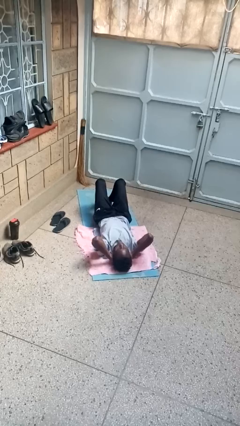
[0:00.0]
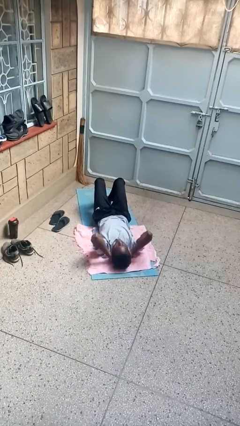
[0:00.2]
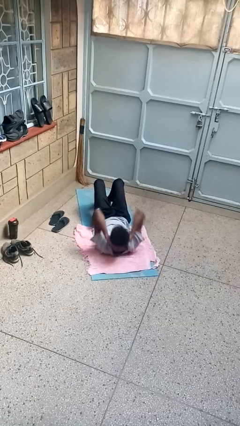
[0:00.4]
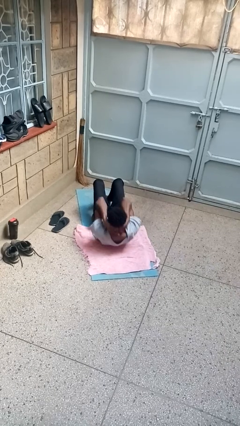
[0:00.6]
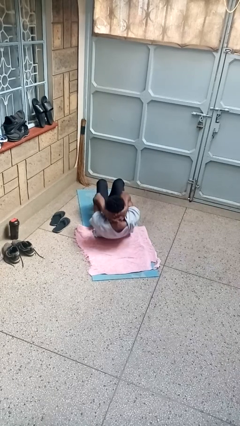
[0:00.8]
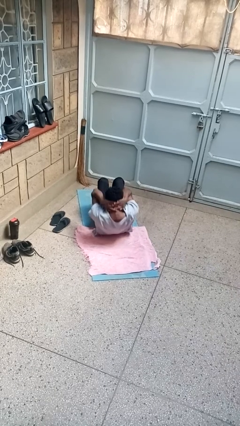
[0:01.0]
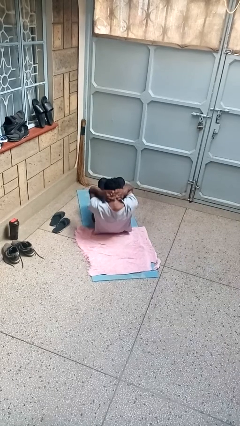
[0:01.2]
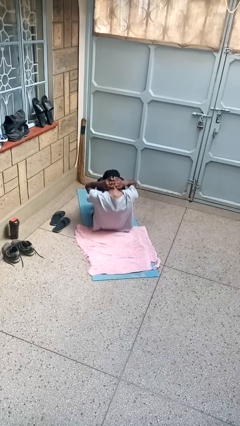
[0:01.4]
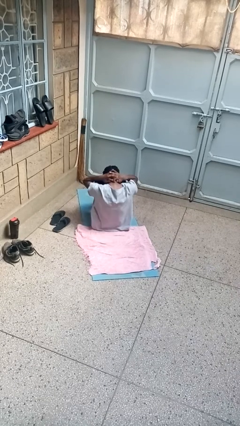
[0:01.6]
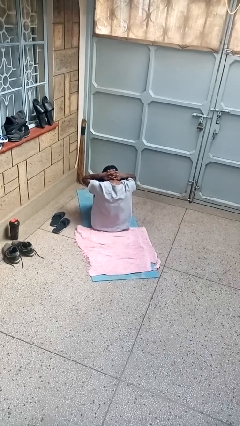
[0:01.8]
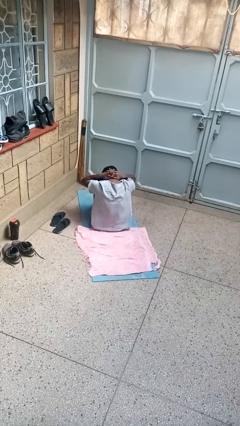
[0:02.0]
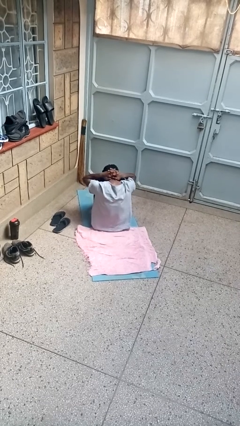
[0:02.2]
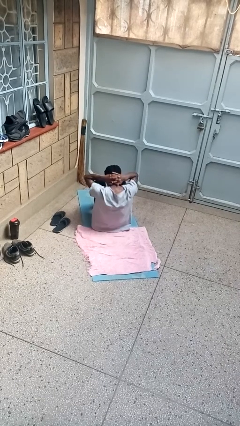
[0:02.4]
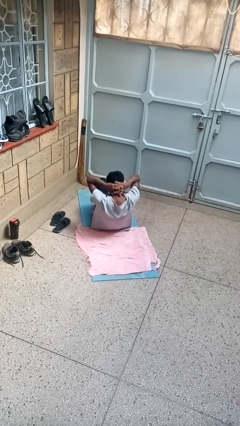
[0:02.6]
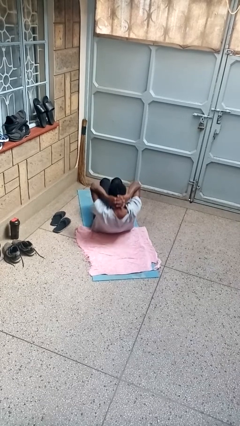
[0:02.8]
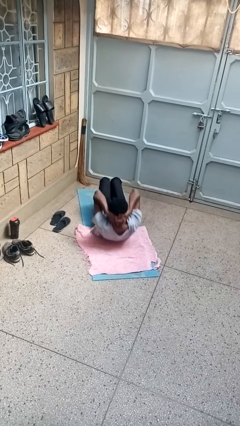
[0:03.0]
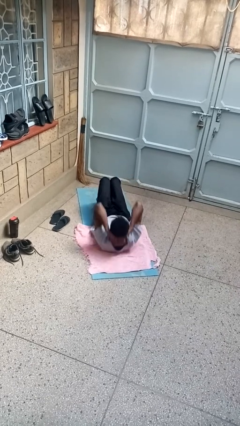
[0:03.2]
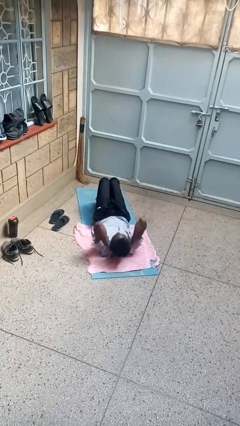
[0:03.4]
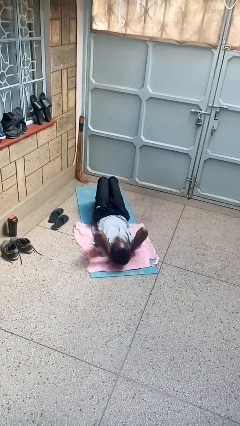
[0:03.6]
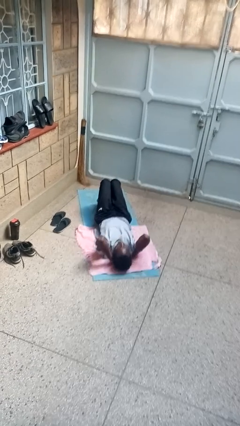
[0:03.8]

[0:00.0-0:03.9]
person exercises with situp

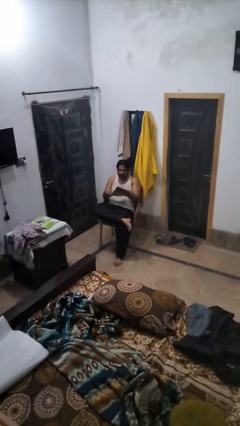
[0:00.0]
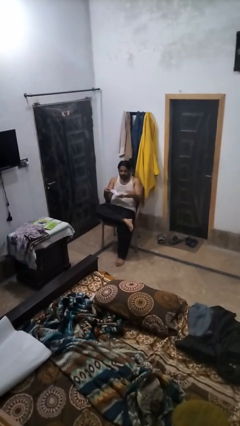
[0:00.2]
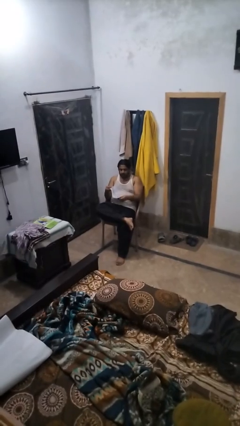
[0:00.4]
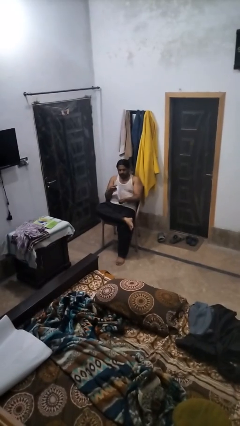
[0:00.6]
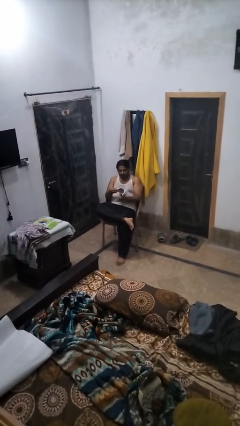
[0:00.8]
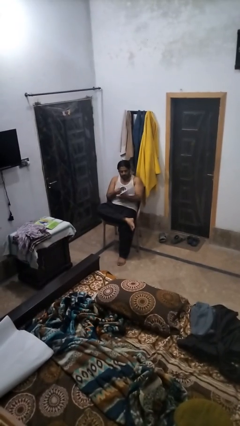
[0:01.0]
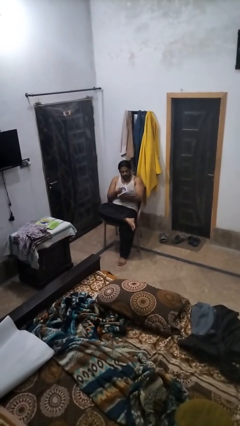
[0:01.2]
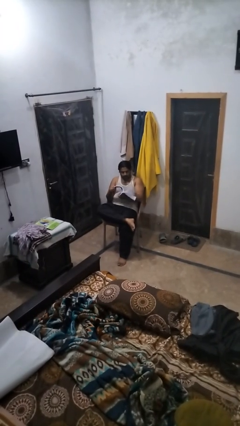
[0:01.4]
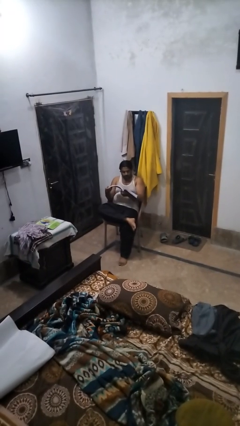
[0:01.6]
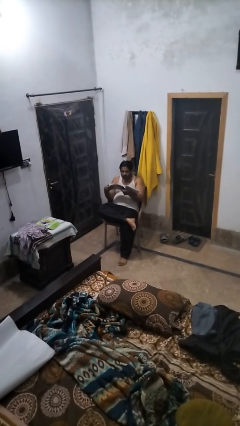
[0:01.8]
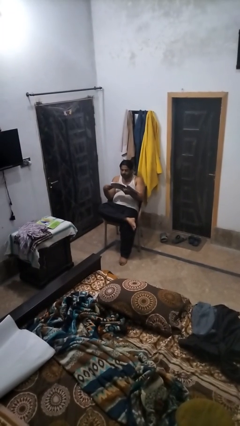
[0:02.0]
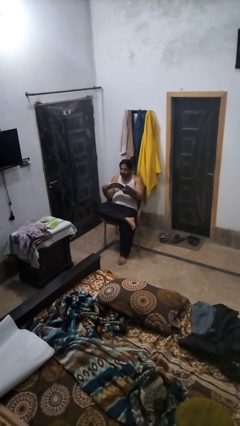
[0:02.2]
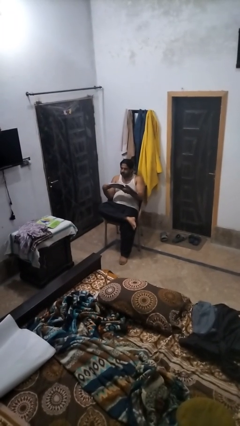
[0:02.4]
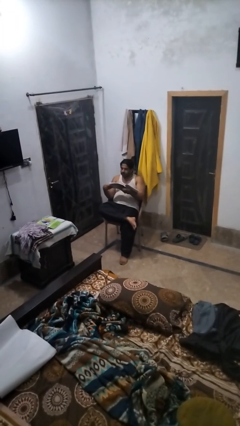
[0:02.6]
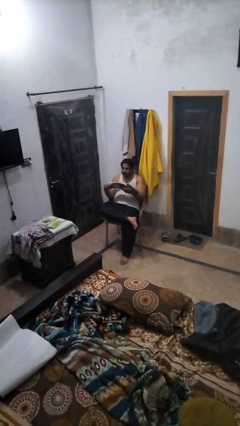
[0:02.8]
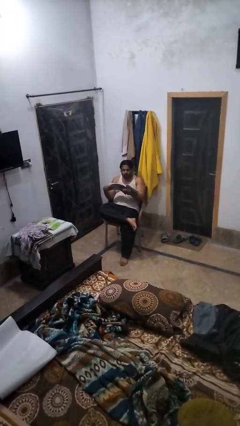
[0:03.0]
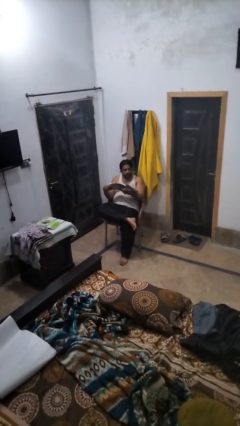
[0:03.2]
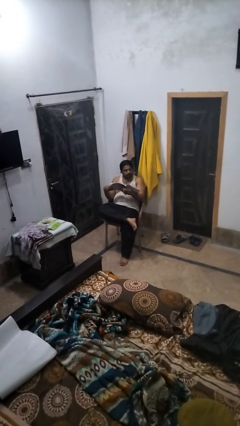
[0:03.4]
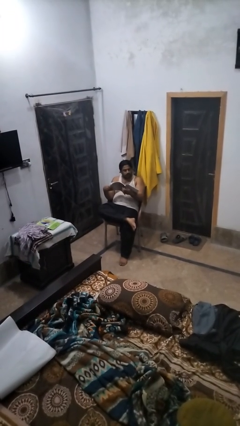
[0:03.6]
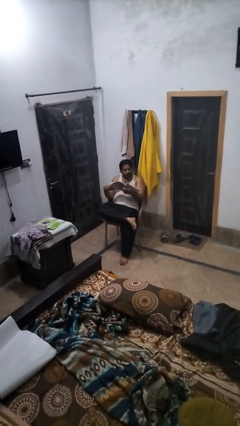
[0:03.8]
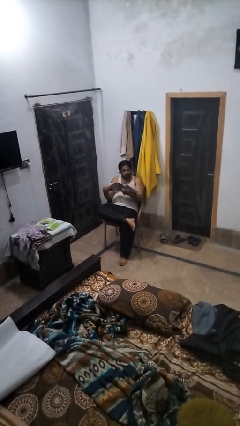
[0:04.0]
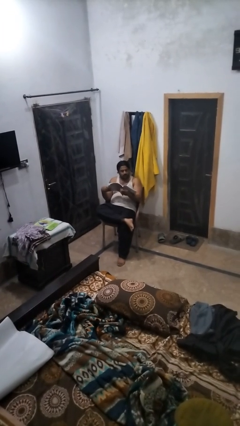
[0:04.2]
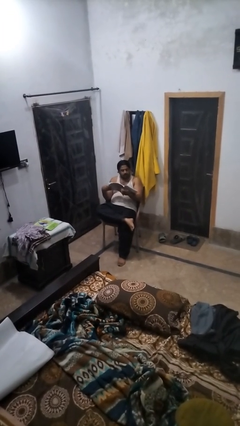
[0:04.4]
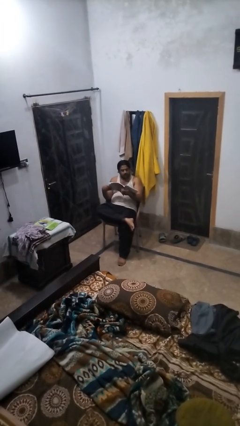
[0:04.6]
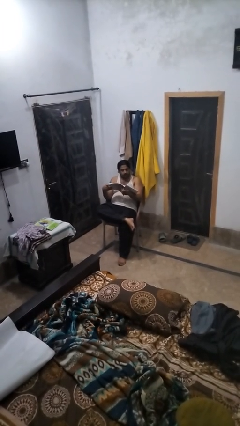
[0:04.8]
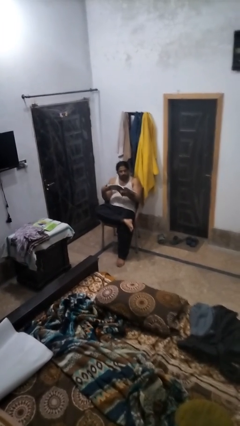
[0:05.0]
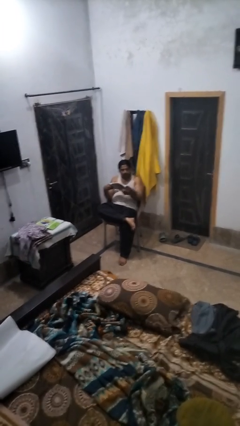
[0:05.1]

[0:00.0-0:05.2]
person reads book

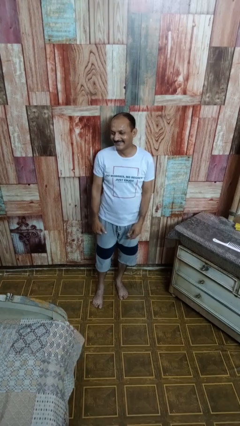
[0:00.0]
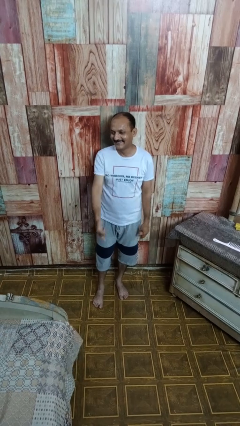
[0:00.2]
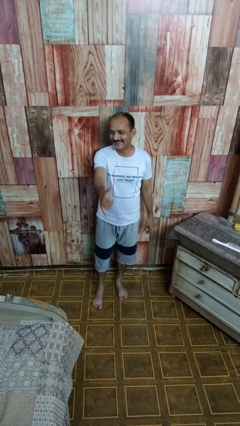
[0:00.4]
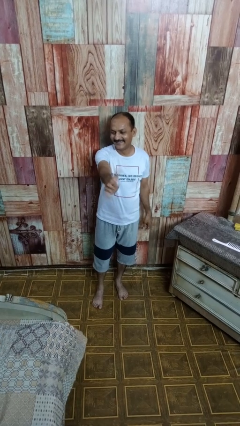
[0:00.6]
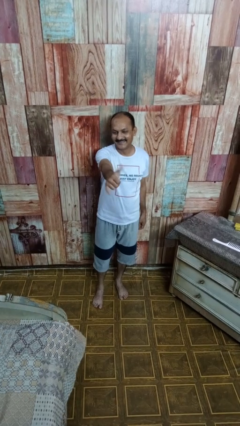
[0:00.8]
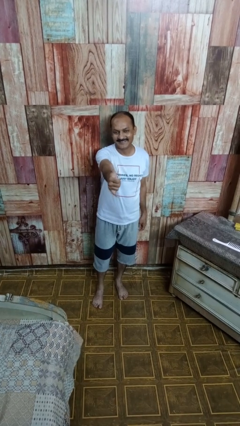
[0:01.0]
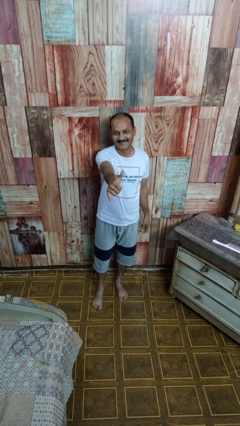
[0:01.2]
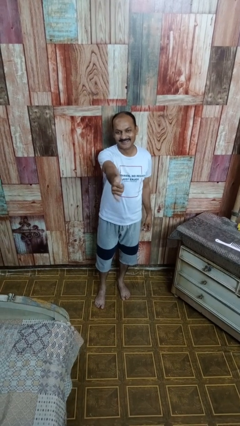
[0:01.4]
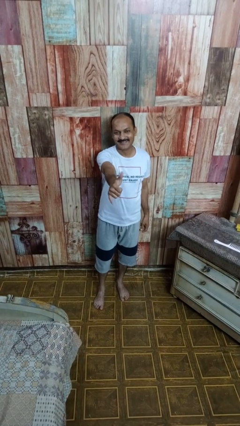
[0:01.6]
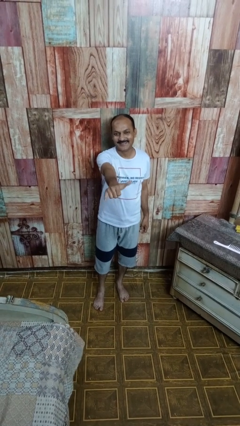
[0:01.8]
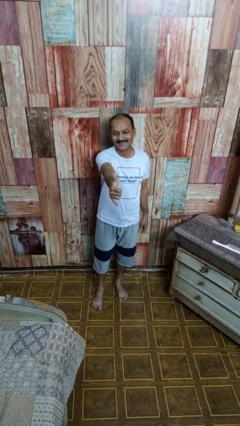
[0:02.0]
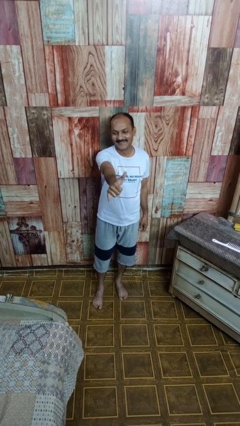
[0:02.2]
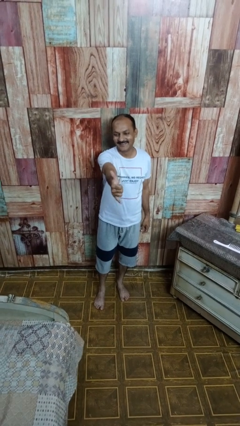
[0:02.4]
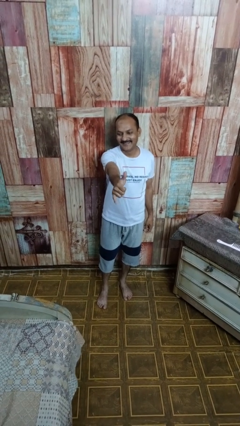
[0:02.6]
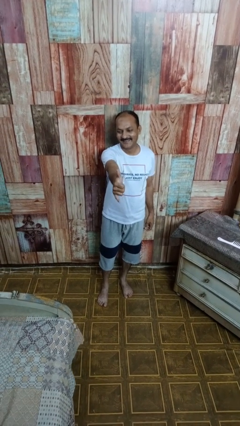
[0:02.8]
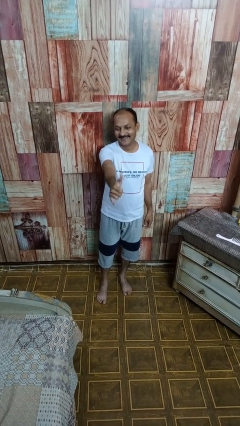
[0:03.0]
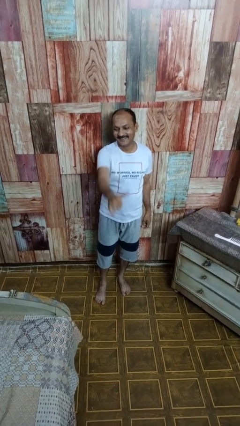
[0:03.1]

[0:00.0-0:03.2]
person gestures hang loose

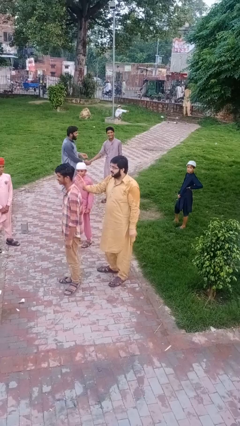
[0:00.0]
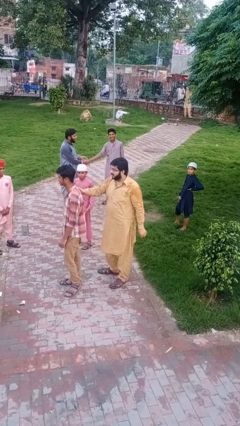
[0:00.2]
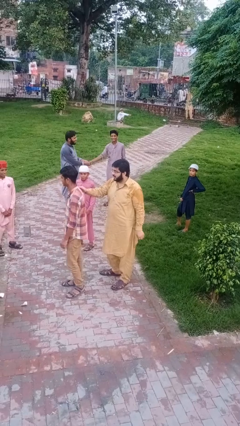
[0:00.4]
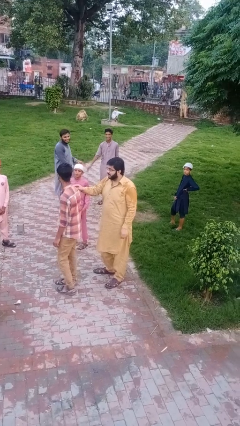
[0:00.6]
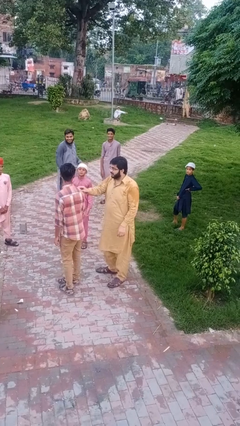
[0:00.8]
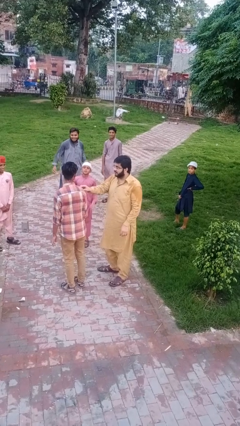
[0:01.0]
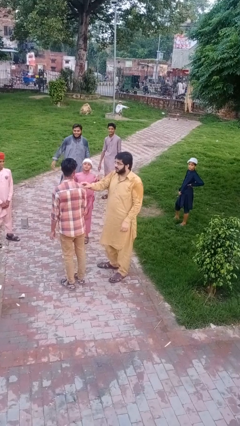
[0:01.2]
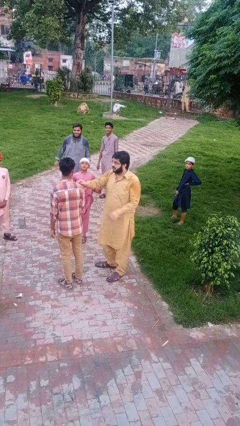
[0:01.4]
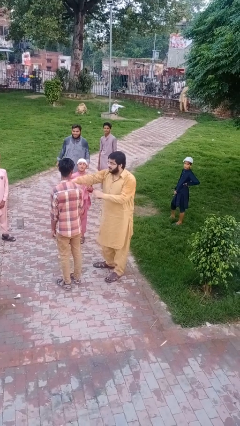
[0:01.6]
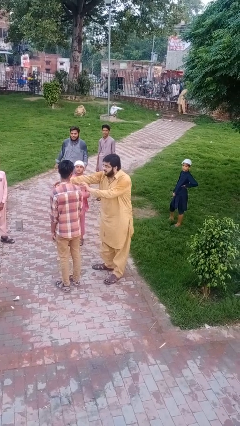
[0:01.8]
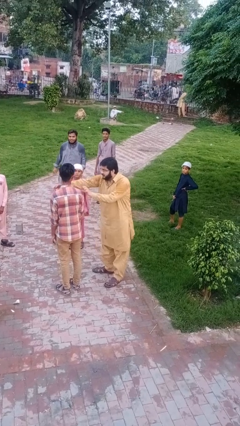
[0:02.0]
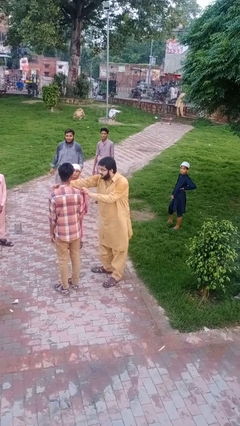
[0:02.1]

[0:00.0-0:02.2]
person grabs person by shoulder

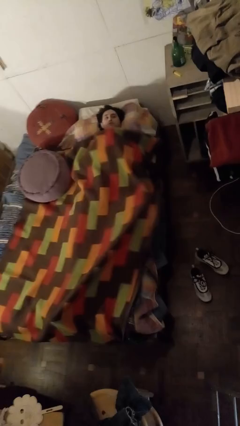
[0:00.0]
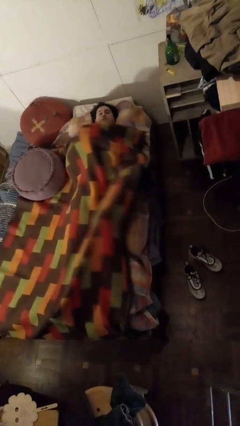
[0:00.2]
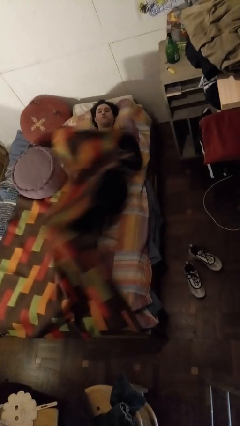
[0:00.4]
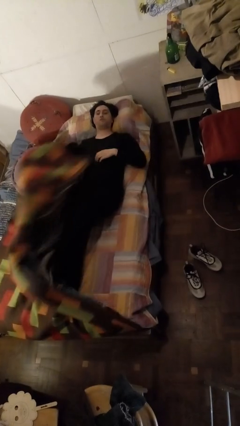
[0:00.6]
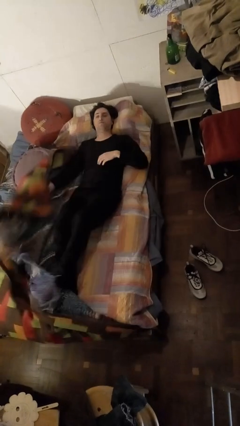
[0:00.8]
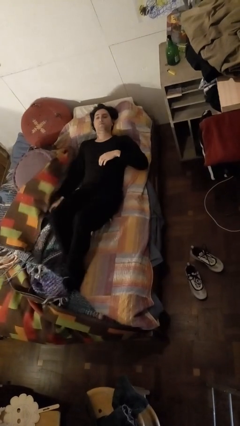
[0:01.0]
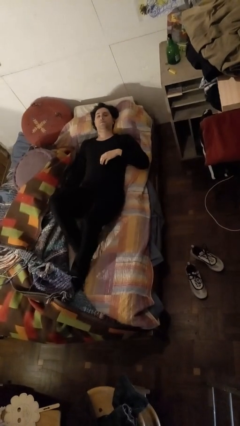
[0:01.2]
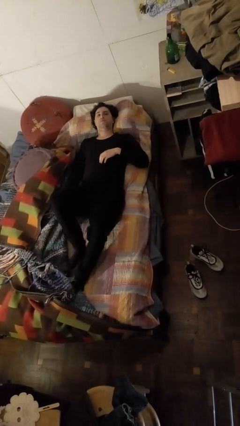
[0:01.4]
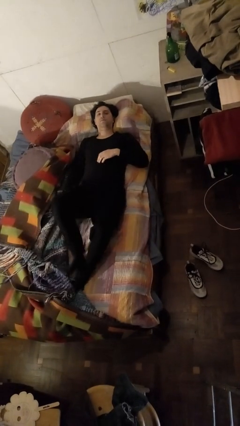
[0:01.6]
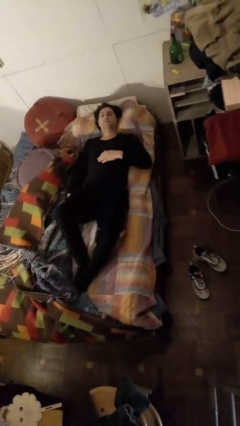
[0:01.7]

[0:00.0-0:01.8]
person uncovers with bedsheets

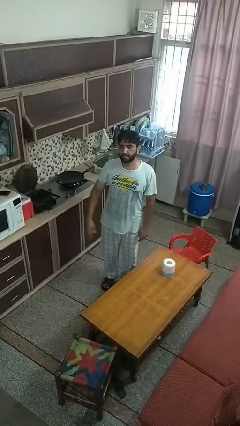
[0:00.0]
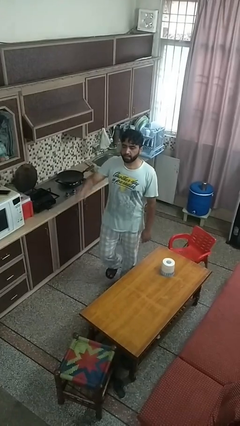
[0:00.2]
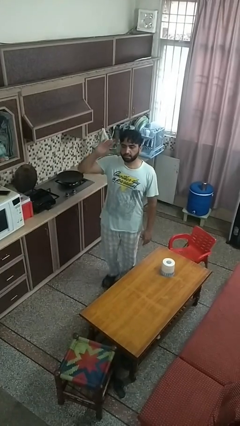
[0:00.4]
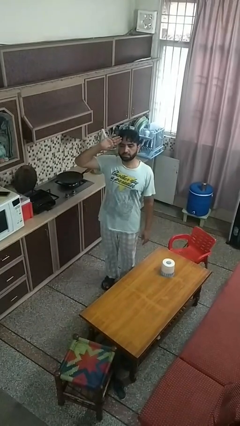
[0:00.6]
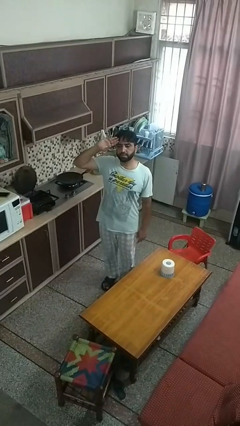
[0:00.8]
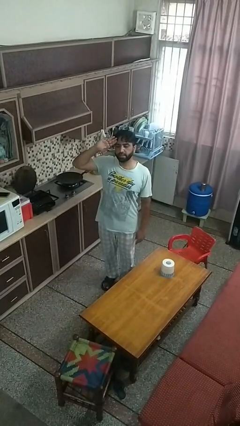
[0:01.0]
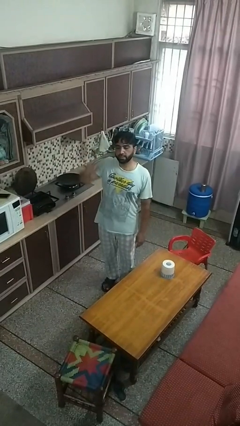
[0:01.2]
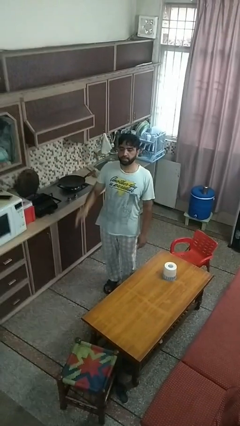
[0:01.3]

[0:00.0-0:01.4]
person salutes
